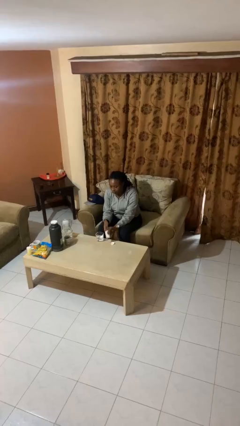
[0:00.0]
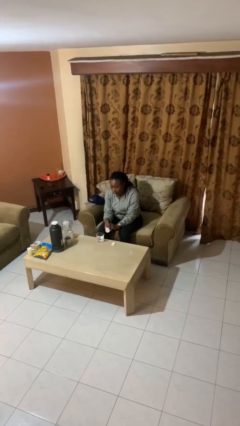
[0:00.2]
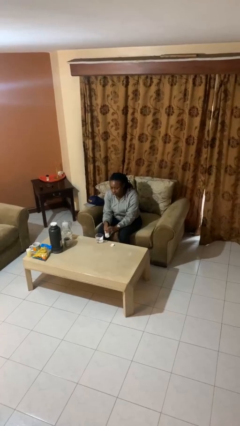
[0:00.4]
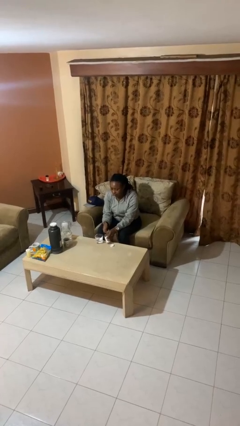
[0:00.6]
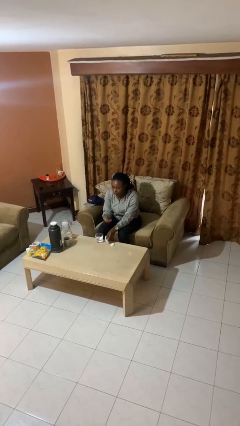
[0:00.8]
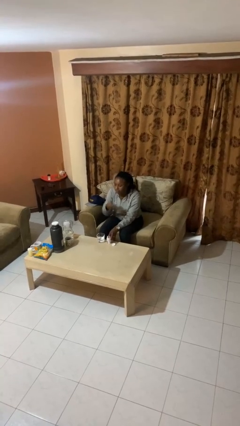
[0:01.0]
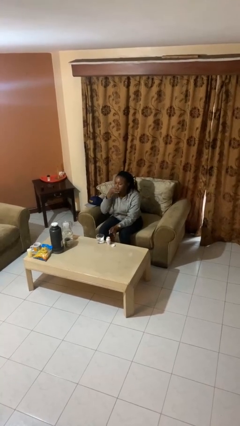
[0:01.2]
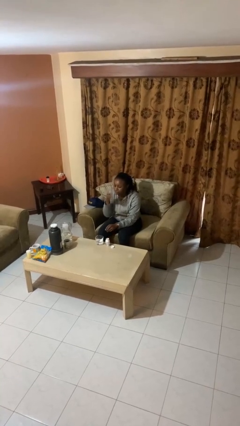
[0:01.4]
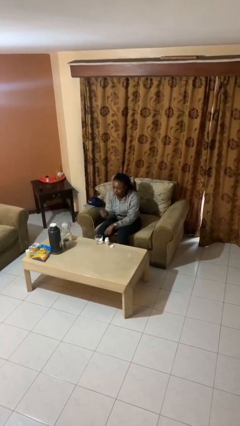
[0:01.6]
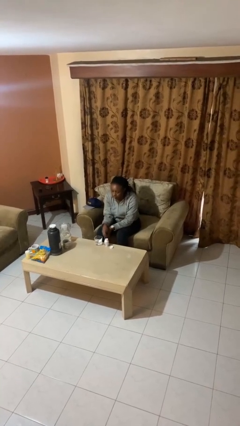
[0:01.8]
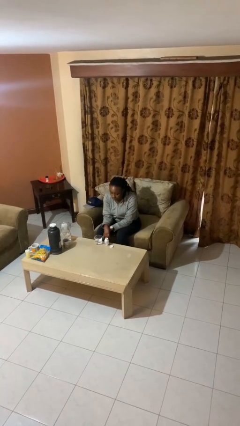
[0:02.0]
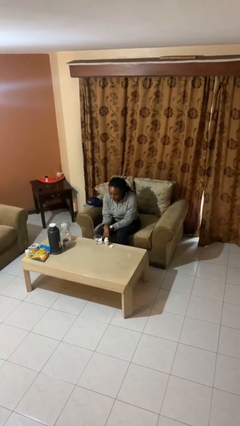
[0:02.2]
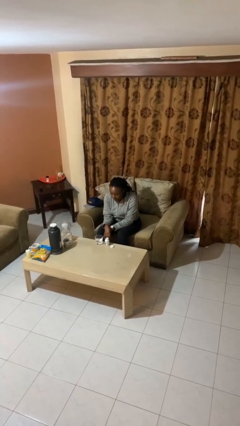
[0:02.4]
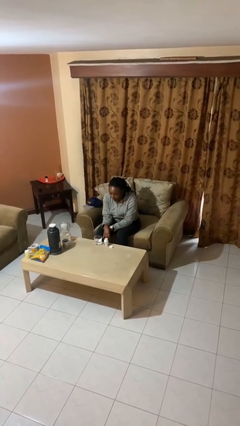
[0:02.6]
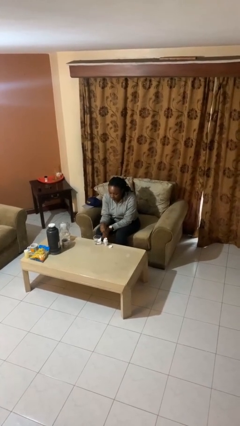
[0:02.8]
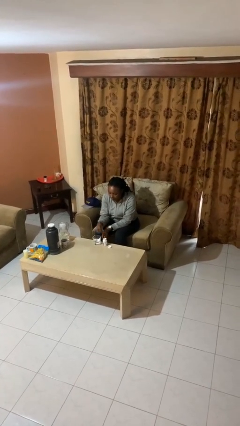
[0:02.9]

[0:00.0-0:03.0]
person takes medicine pills

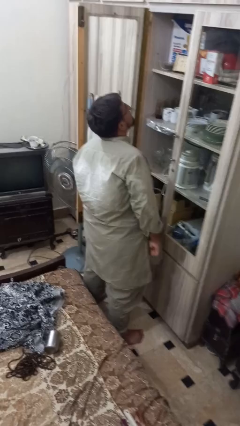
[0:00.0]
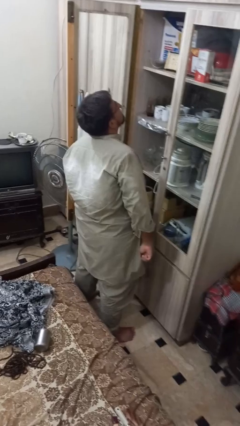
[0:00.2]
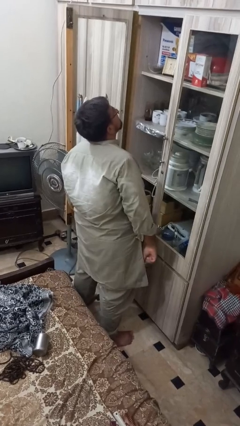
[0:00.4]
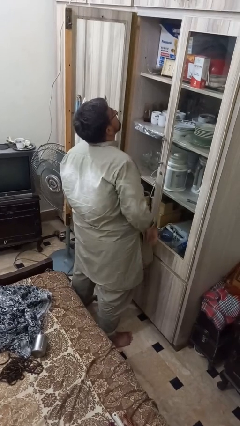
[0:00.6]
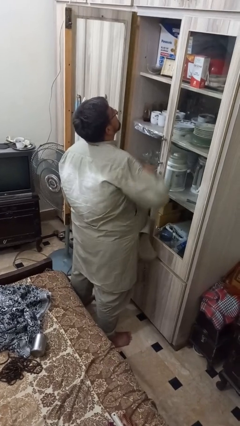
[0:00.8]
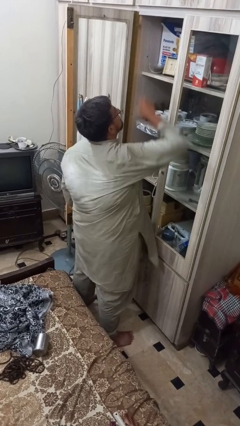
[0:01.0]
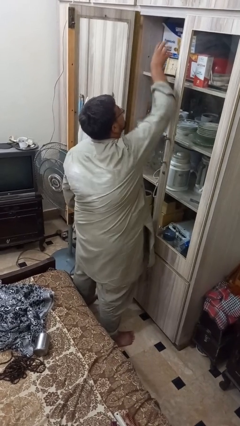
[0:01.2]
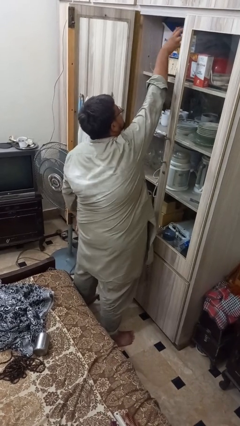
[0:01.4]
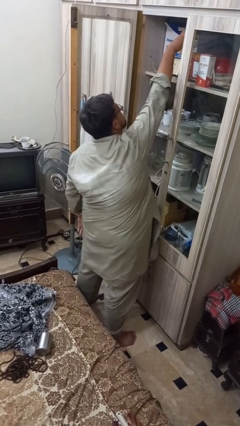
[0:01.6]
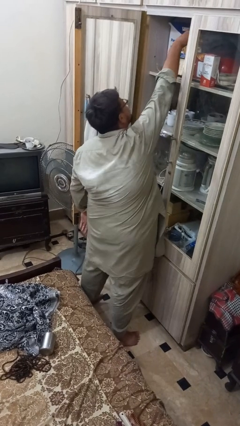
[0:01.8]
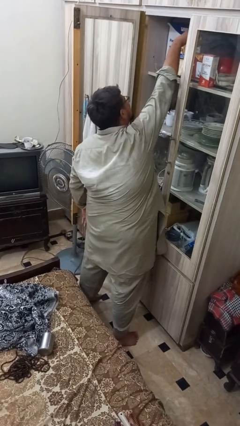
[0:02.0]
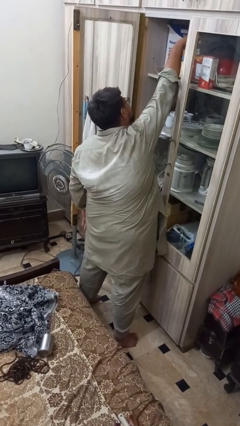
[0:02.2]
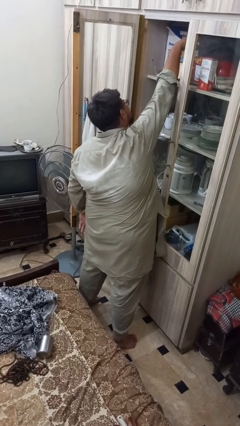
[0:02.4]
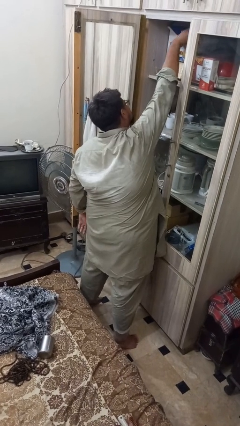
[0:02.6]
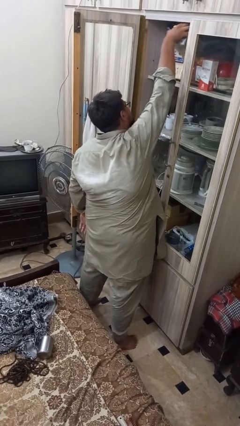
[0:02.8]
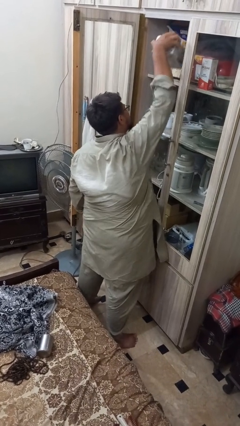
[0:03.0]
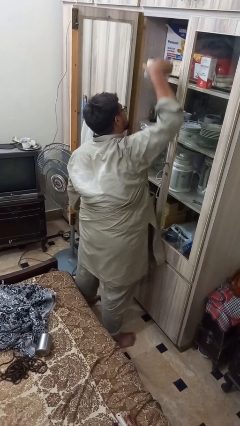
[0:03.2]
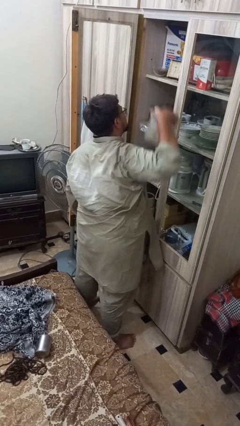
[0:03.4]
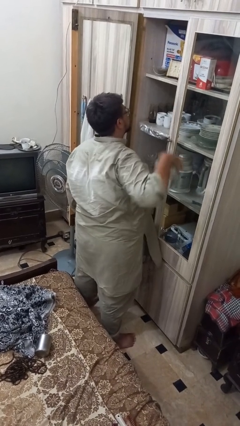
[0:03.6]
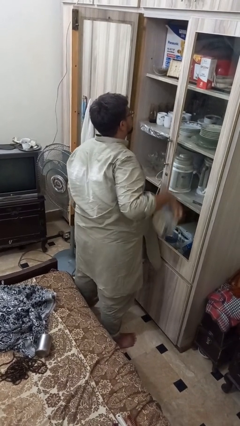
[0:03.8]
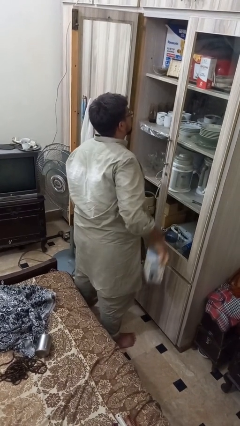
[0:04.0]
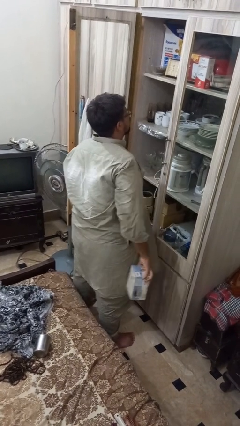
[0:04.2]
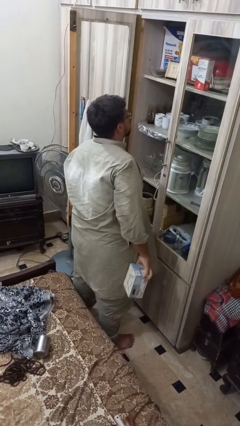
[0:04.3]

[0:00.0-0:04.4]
person picks up object from shelf

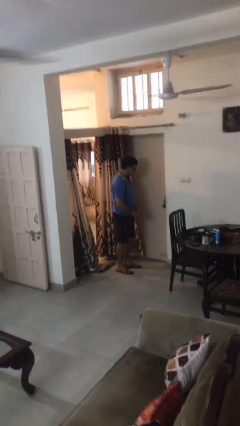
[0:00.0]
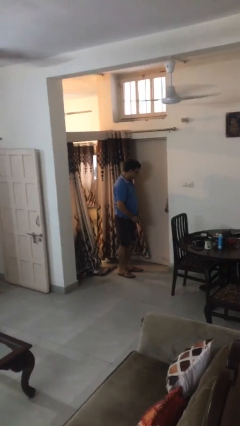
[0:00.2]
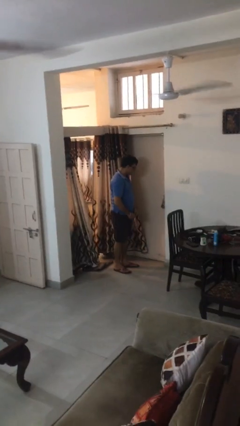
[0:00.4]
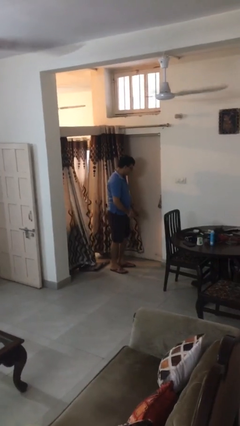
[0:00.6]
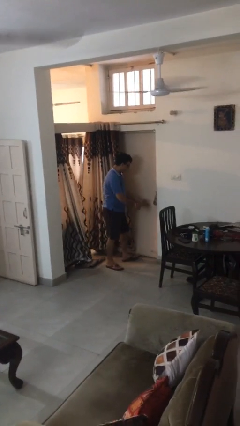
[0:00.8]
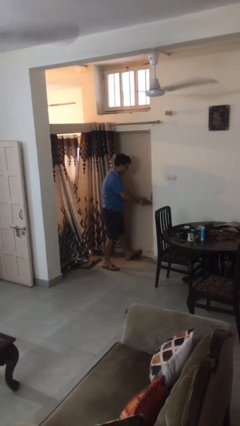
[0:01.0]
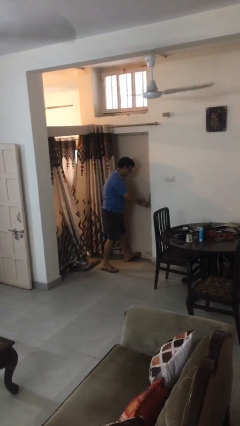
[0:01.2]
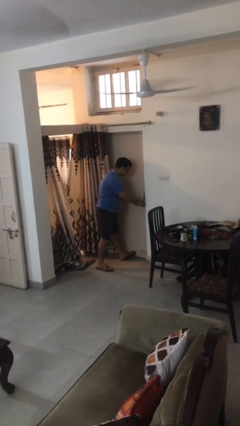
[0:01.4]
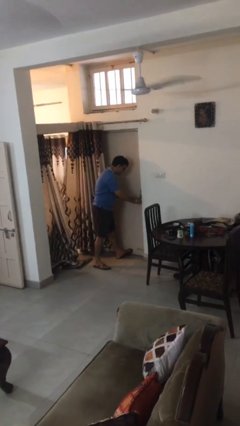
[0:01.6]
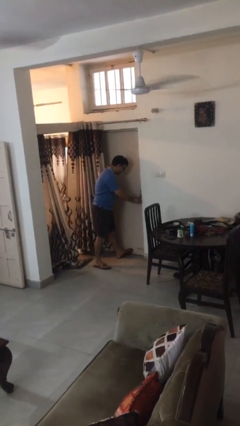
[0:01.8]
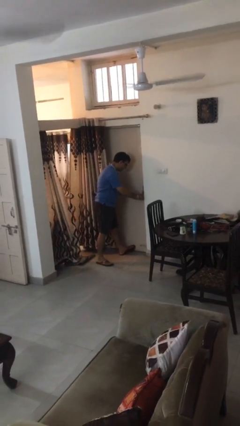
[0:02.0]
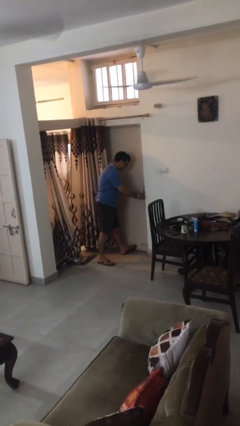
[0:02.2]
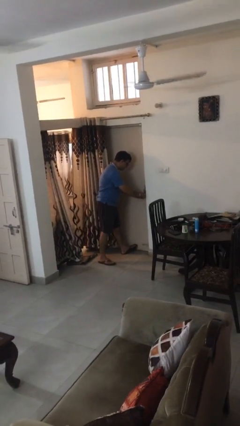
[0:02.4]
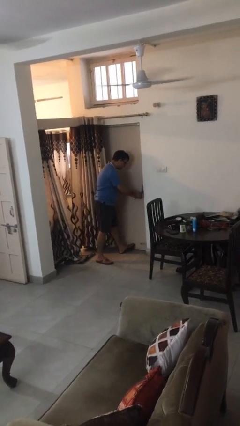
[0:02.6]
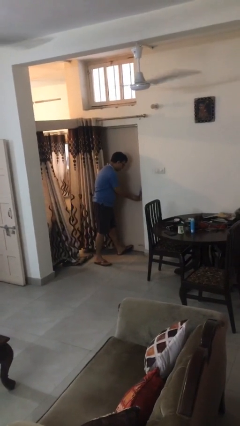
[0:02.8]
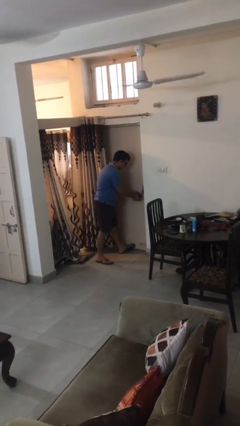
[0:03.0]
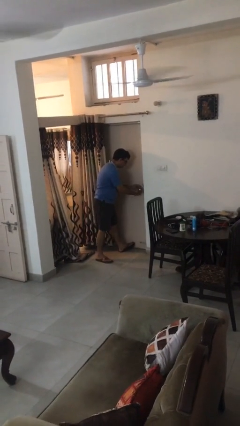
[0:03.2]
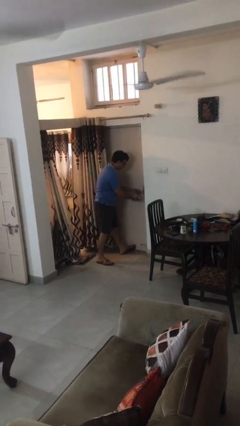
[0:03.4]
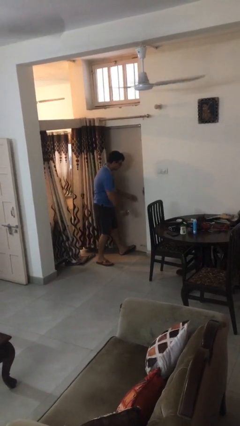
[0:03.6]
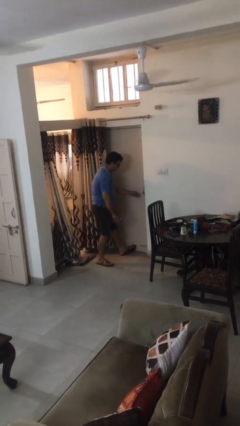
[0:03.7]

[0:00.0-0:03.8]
person unlocks door with keys

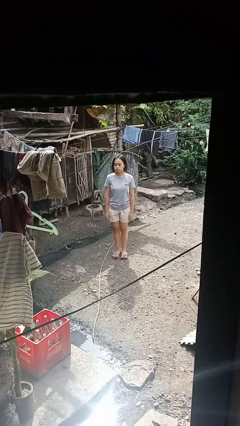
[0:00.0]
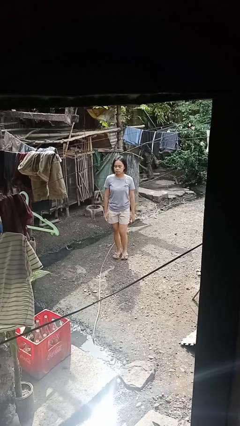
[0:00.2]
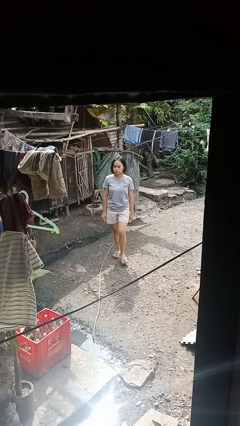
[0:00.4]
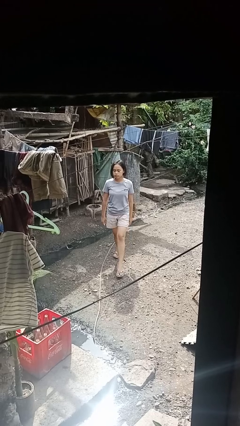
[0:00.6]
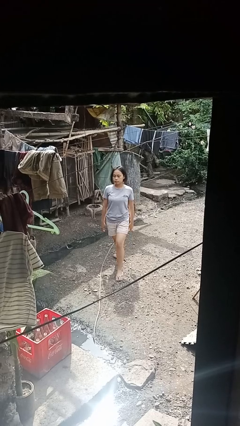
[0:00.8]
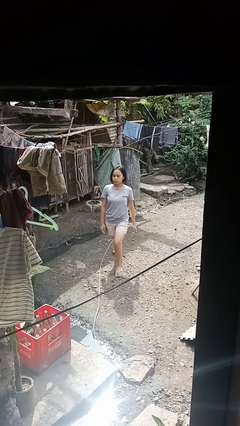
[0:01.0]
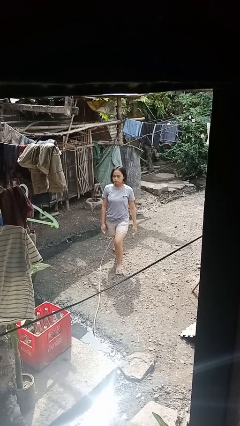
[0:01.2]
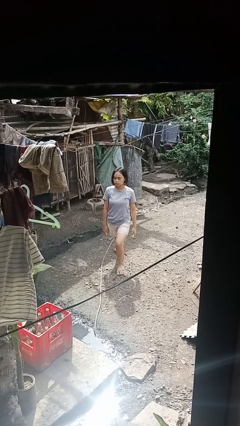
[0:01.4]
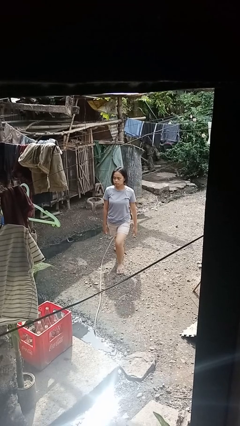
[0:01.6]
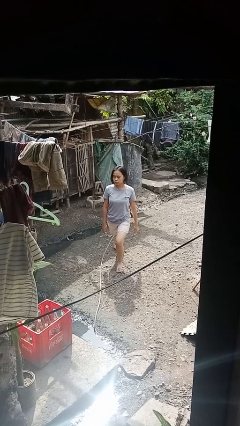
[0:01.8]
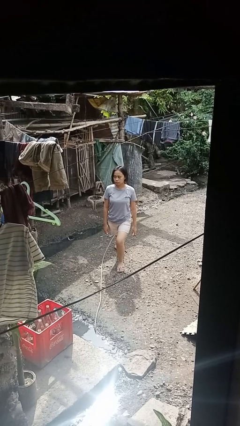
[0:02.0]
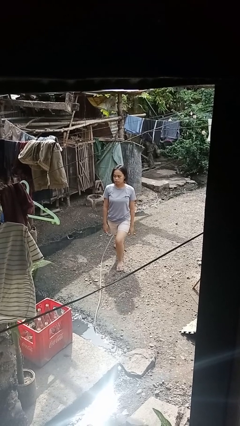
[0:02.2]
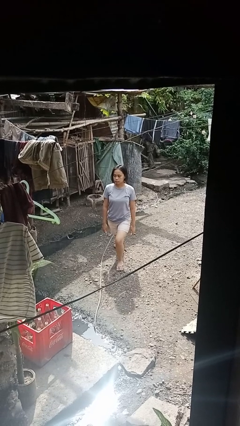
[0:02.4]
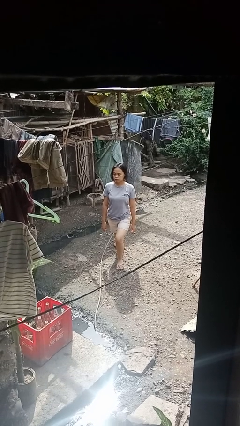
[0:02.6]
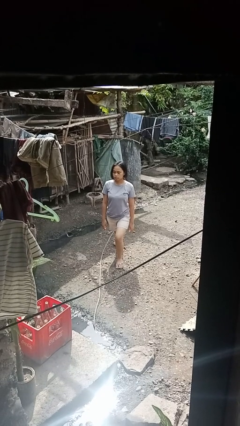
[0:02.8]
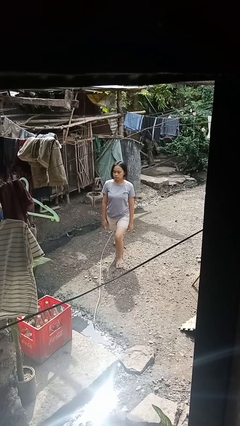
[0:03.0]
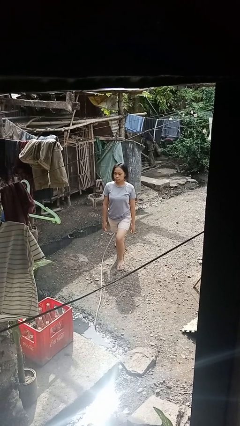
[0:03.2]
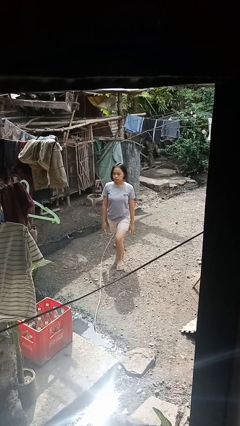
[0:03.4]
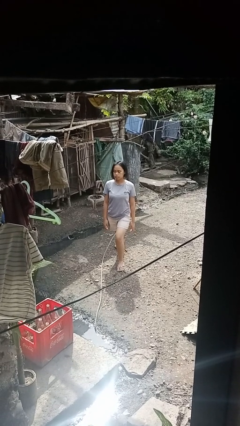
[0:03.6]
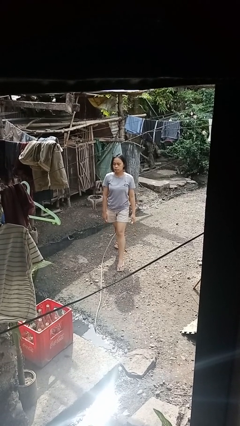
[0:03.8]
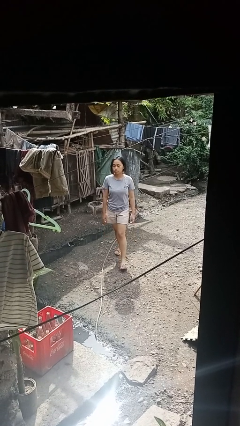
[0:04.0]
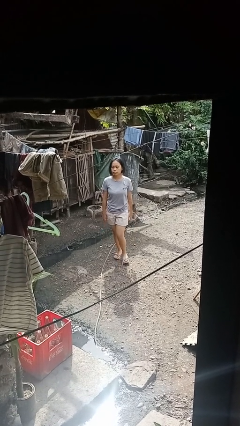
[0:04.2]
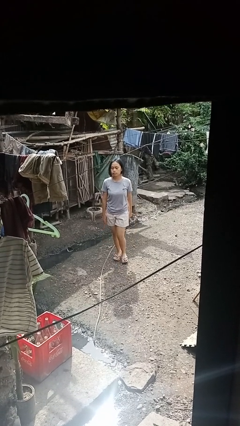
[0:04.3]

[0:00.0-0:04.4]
person exercises with lunges

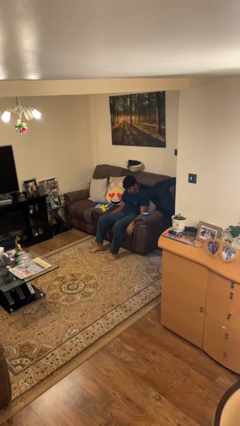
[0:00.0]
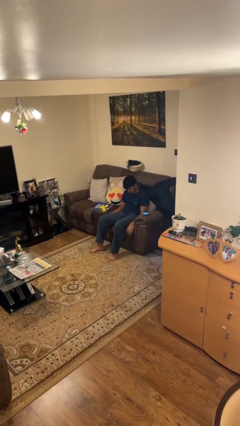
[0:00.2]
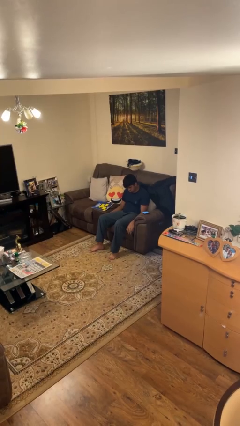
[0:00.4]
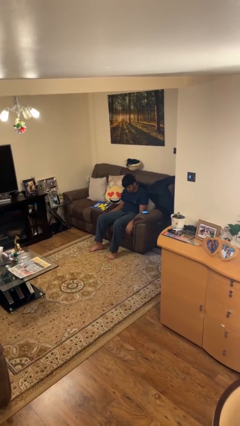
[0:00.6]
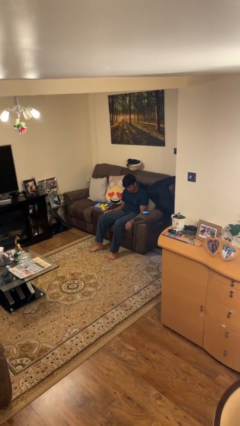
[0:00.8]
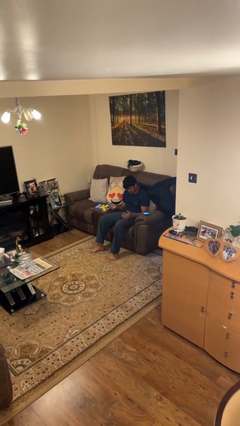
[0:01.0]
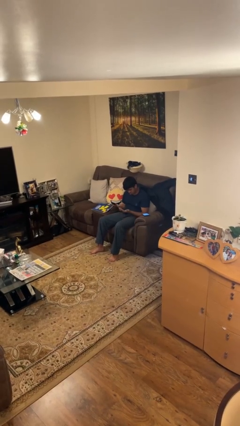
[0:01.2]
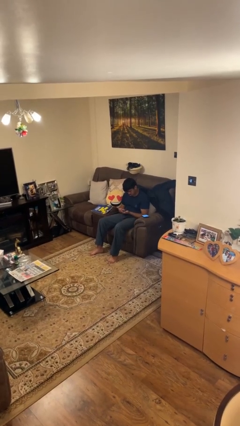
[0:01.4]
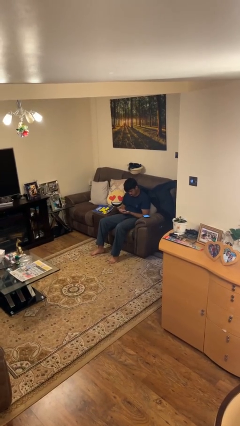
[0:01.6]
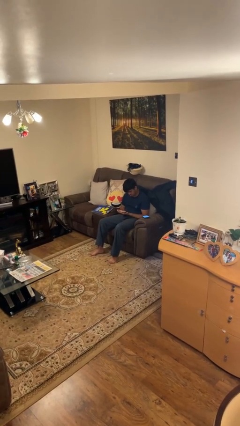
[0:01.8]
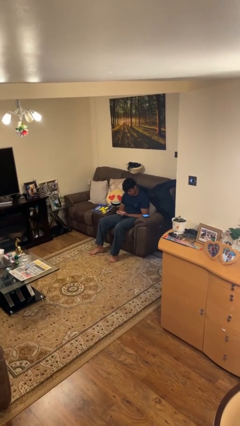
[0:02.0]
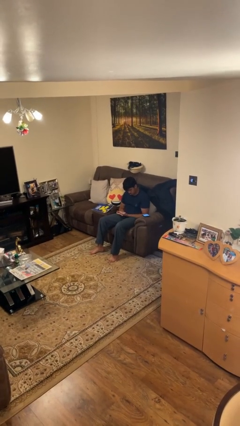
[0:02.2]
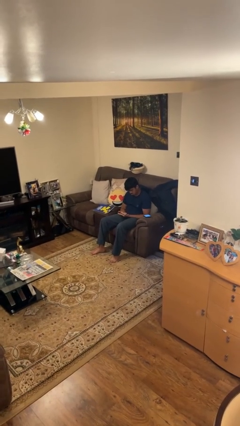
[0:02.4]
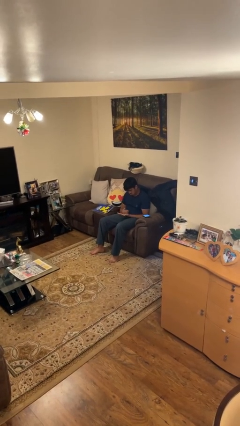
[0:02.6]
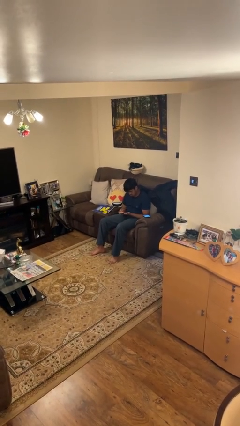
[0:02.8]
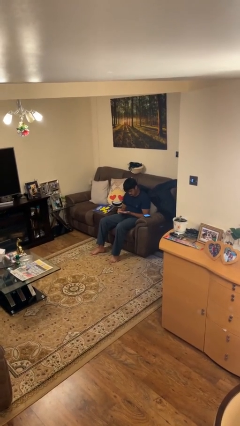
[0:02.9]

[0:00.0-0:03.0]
person looks at hands in lap
